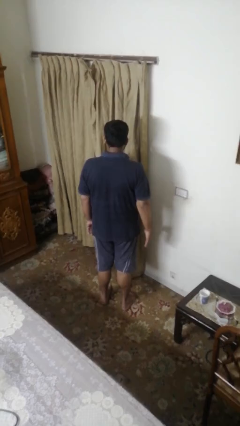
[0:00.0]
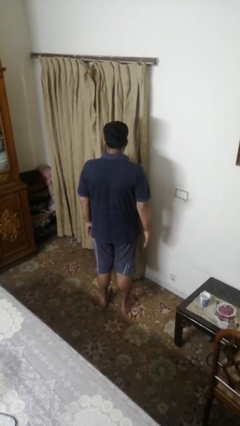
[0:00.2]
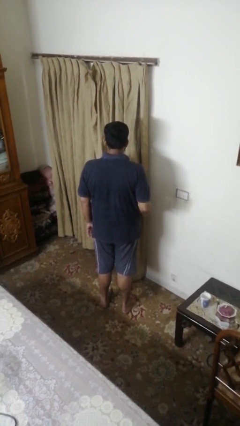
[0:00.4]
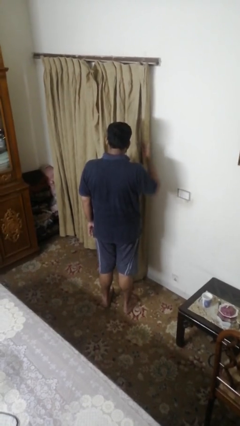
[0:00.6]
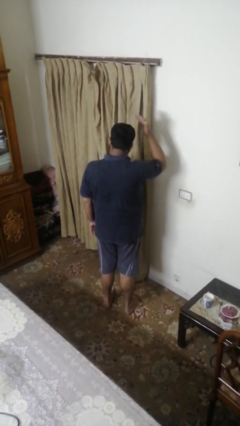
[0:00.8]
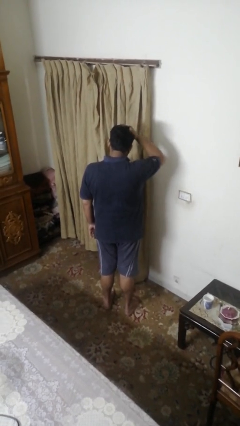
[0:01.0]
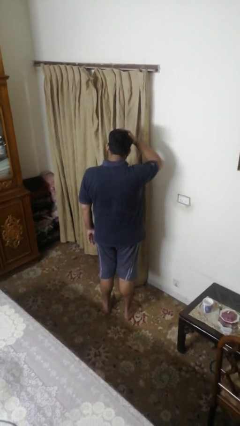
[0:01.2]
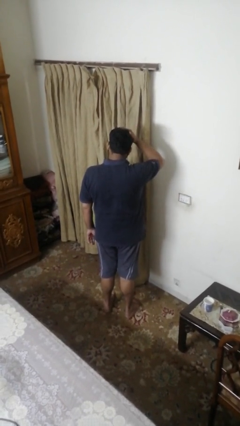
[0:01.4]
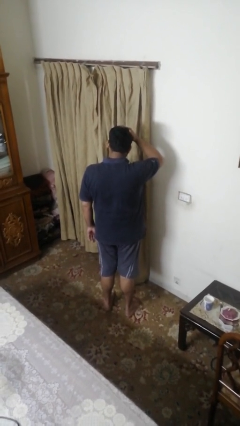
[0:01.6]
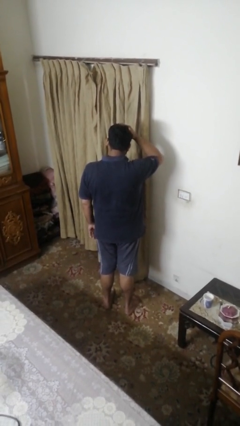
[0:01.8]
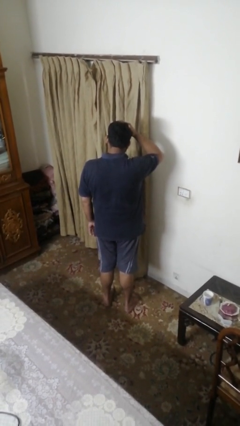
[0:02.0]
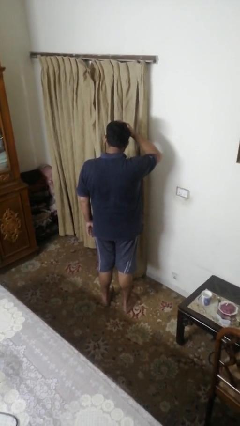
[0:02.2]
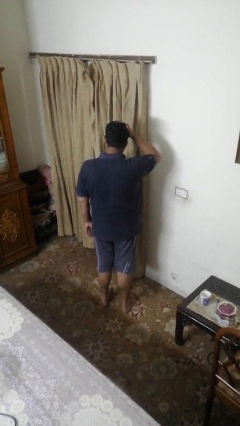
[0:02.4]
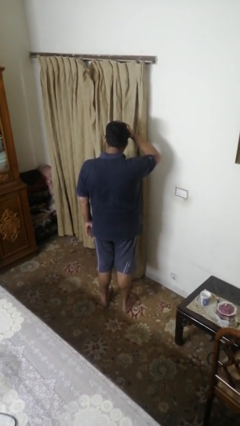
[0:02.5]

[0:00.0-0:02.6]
person pats head

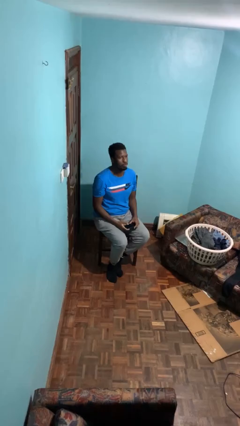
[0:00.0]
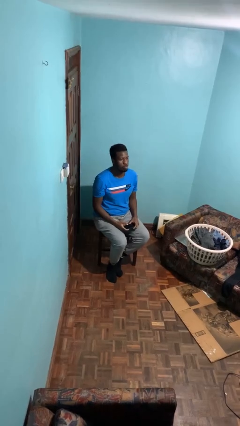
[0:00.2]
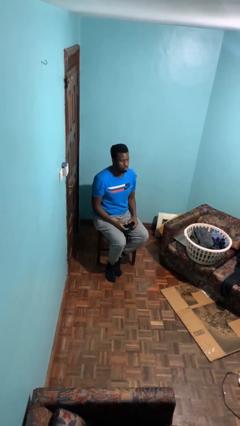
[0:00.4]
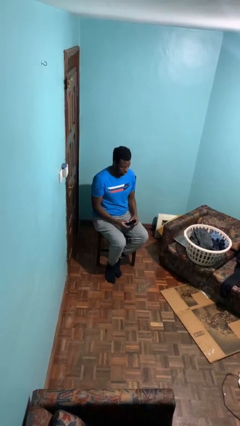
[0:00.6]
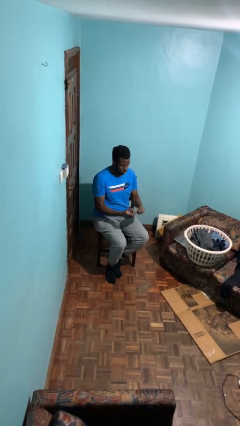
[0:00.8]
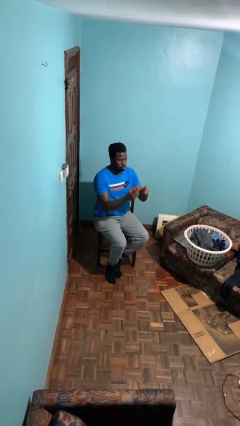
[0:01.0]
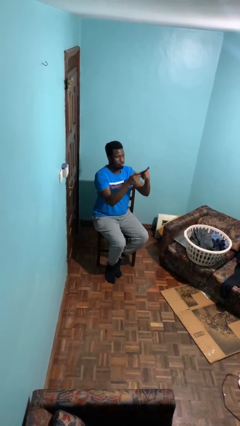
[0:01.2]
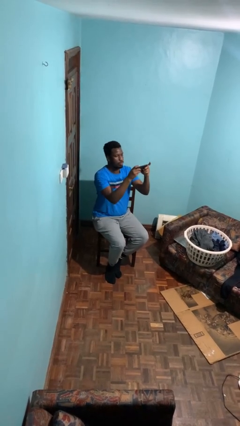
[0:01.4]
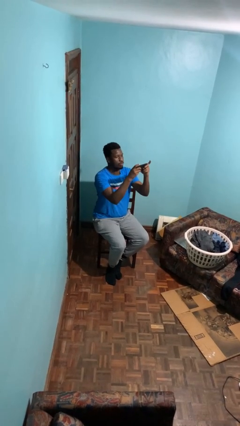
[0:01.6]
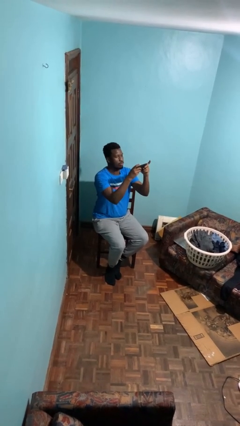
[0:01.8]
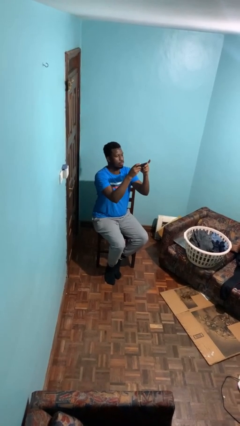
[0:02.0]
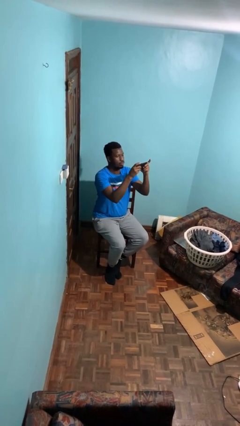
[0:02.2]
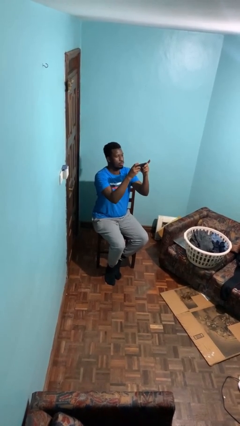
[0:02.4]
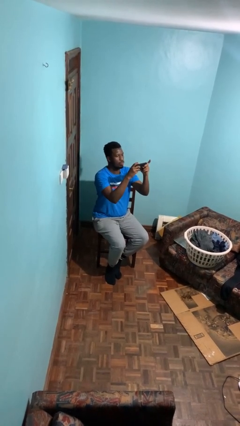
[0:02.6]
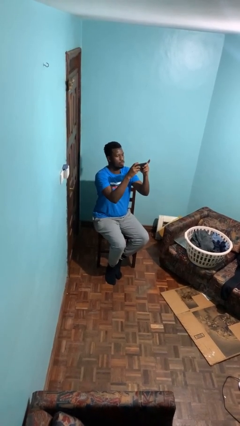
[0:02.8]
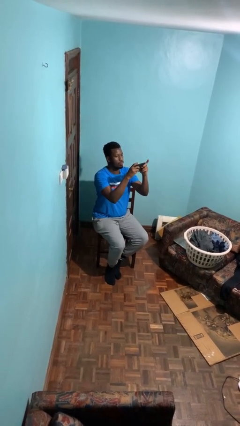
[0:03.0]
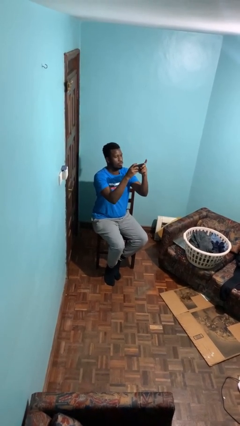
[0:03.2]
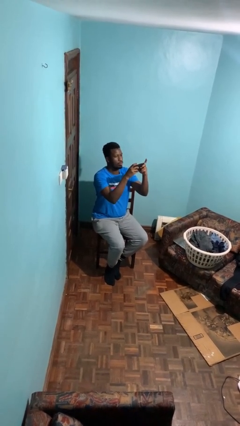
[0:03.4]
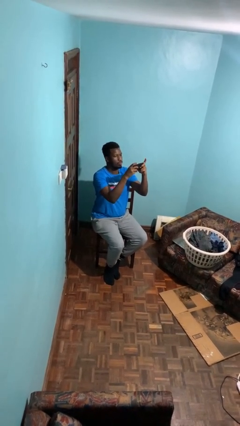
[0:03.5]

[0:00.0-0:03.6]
person interacts with handheld game

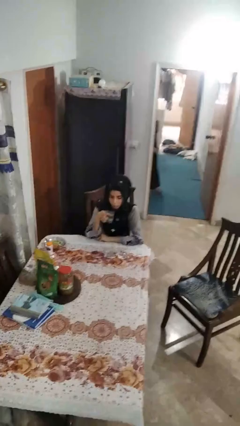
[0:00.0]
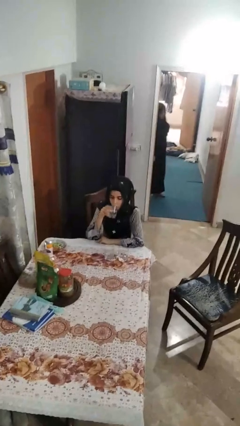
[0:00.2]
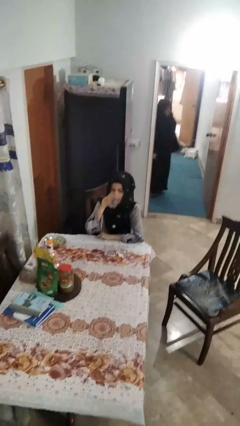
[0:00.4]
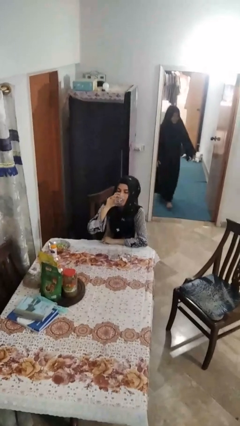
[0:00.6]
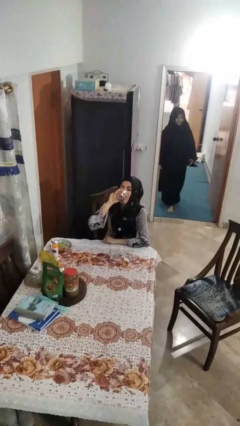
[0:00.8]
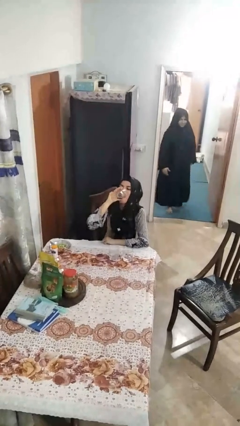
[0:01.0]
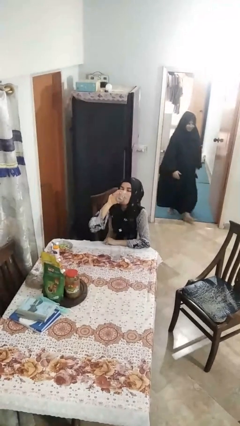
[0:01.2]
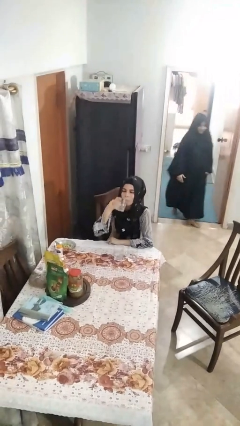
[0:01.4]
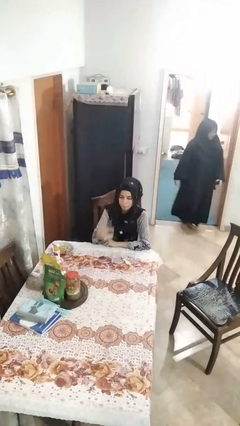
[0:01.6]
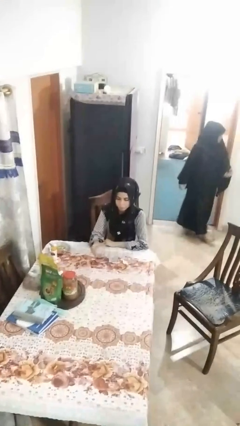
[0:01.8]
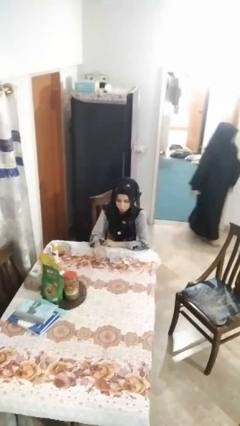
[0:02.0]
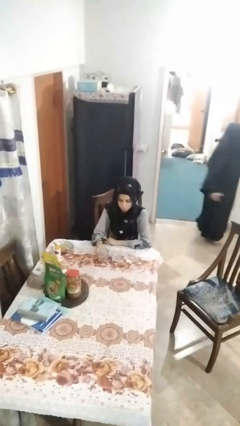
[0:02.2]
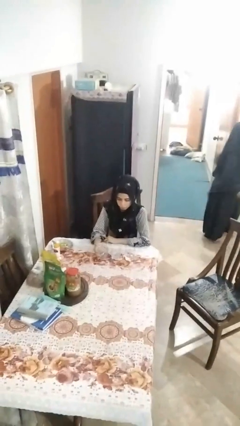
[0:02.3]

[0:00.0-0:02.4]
person drinks from shotglass

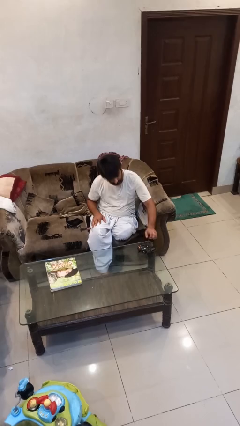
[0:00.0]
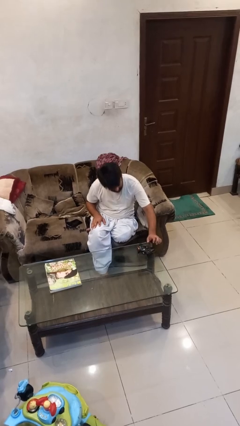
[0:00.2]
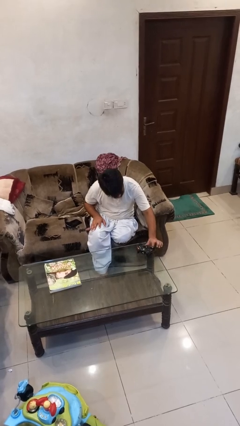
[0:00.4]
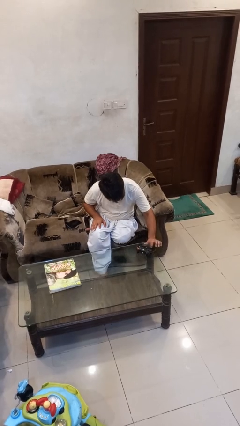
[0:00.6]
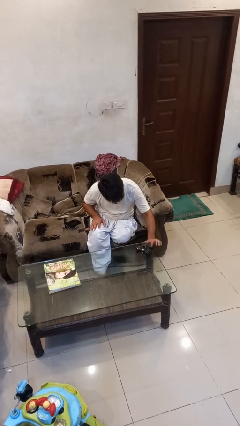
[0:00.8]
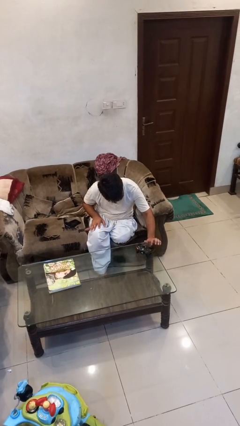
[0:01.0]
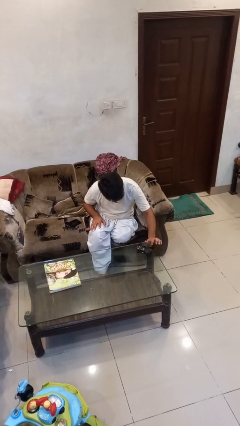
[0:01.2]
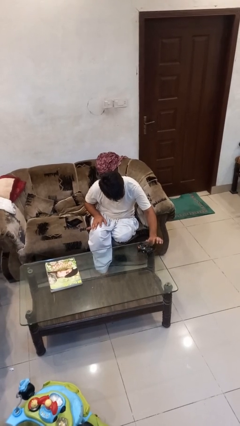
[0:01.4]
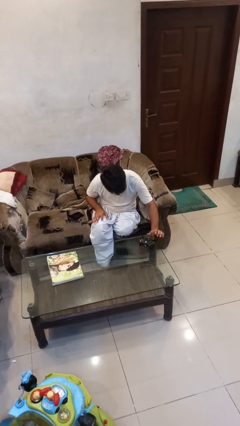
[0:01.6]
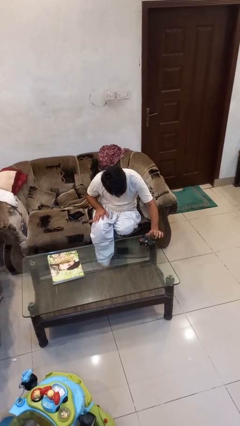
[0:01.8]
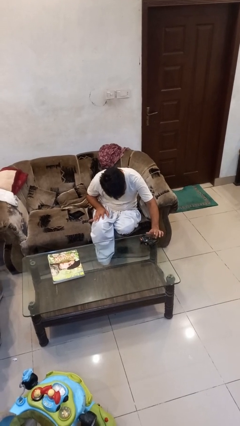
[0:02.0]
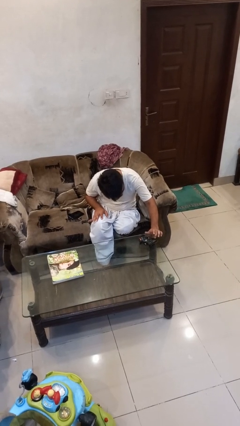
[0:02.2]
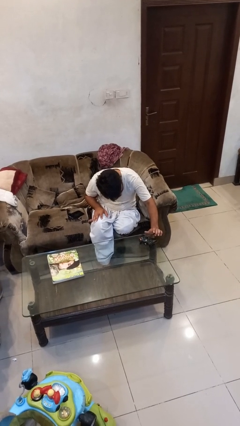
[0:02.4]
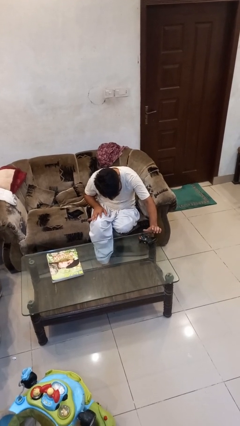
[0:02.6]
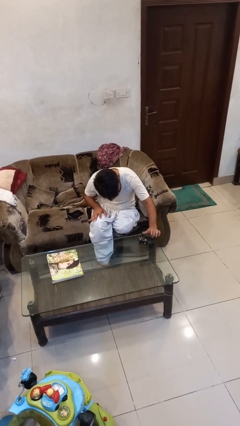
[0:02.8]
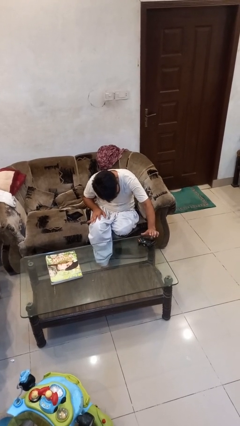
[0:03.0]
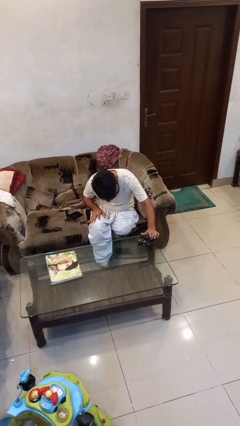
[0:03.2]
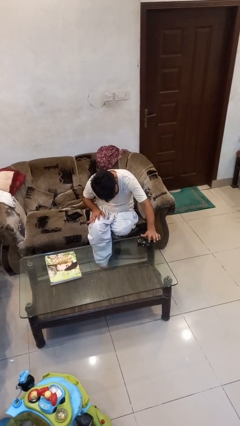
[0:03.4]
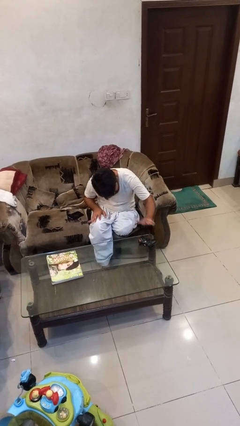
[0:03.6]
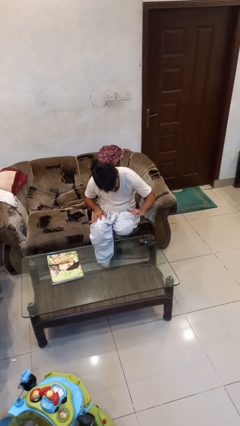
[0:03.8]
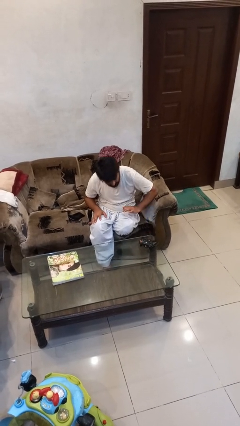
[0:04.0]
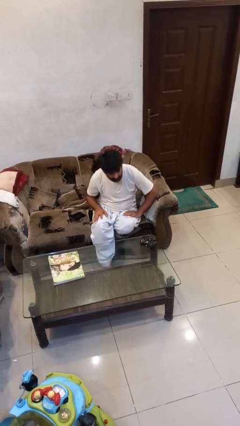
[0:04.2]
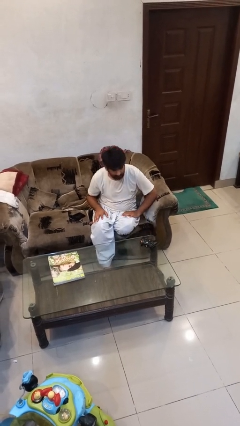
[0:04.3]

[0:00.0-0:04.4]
person taps object with finger

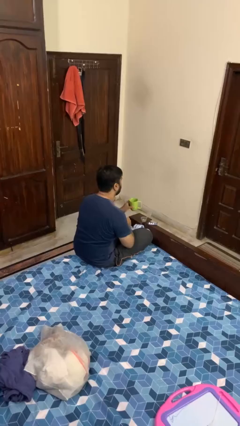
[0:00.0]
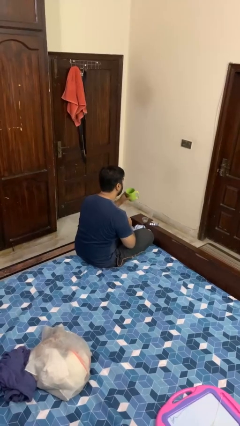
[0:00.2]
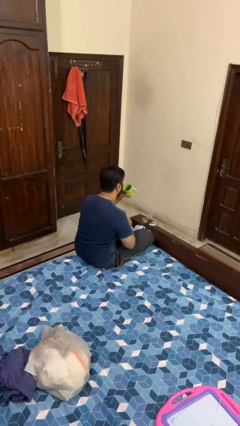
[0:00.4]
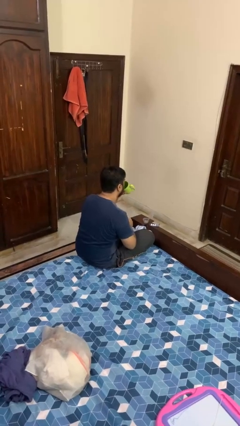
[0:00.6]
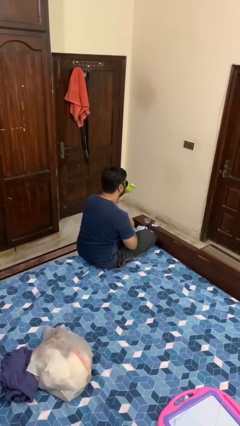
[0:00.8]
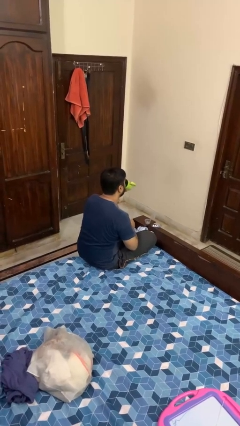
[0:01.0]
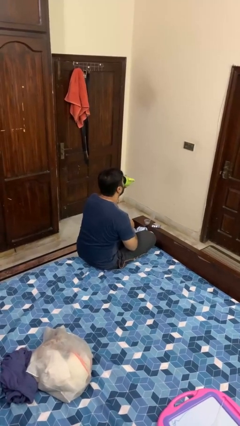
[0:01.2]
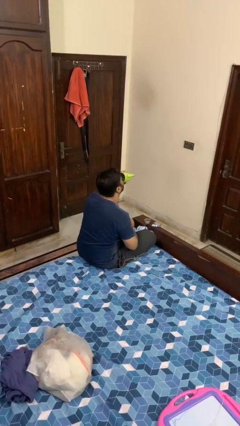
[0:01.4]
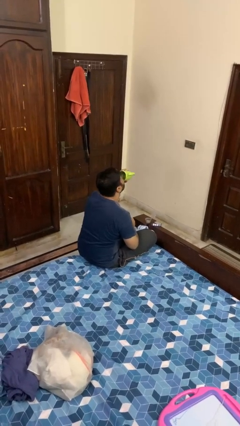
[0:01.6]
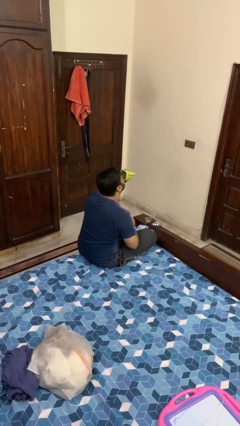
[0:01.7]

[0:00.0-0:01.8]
person drinks from cup

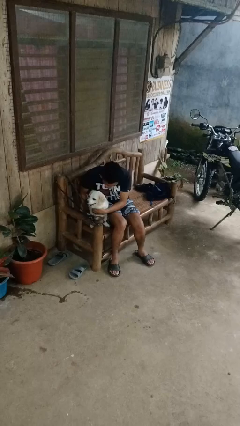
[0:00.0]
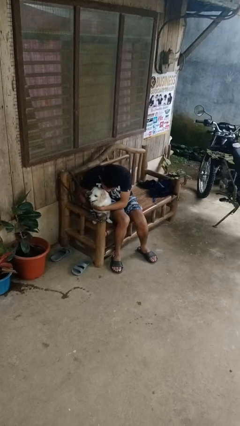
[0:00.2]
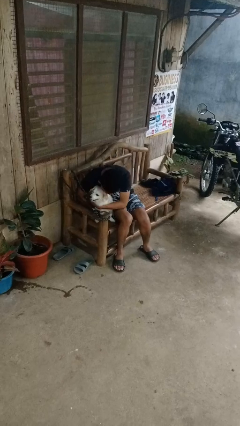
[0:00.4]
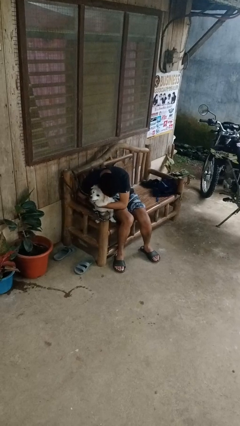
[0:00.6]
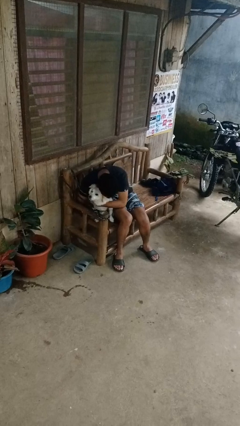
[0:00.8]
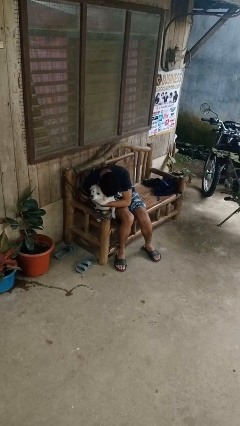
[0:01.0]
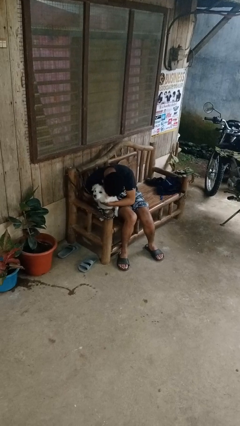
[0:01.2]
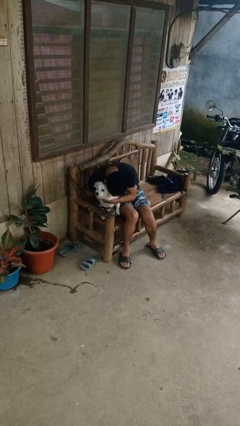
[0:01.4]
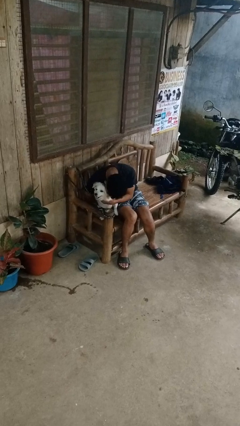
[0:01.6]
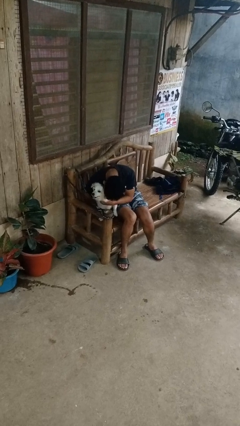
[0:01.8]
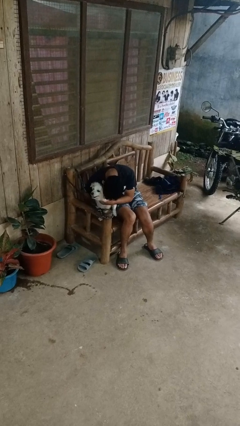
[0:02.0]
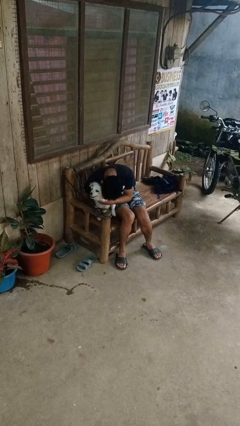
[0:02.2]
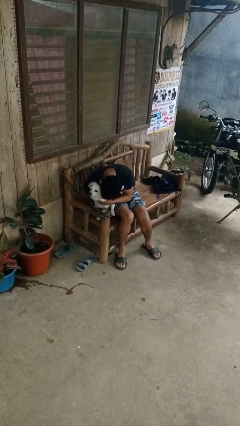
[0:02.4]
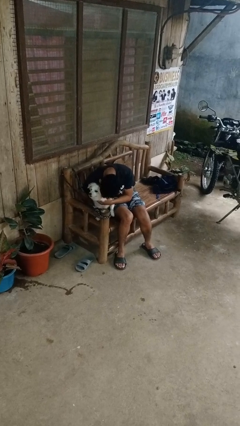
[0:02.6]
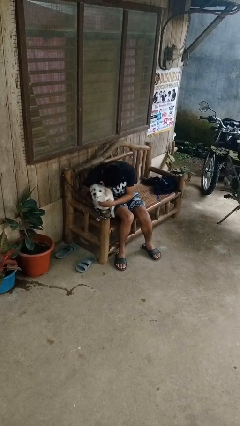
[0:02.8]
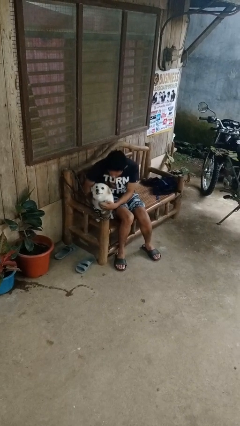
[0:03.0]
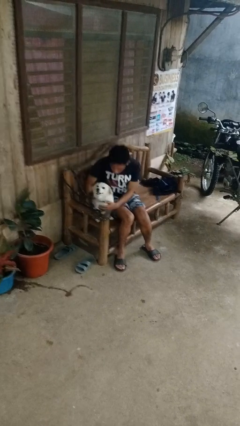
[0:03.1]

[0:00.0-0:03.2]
person hugs dog
